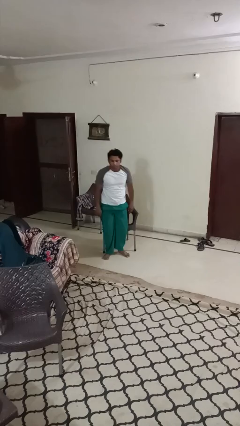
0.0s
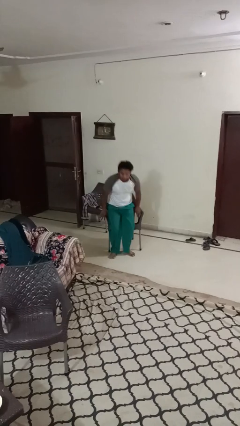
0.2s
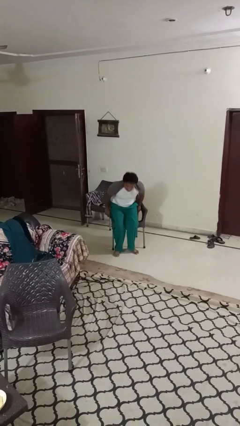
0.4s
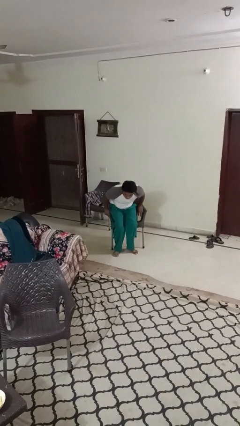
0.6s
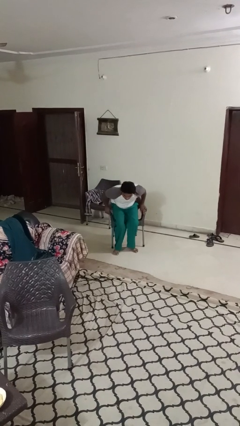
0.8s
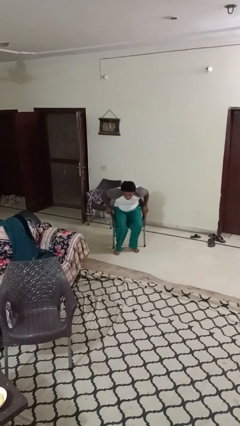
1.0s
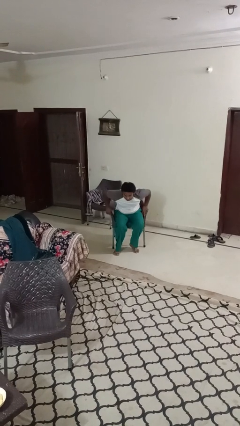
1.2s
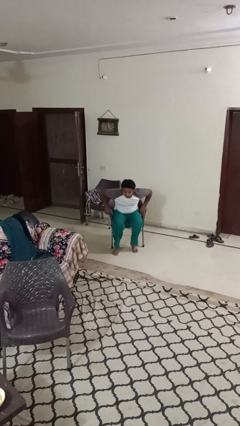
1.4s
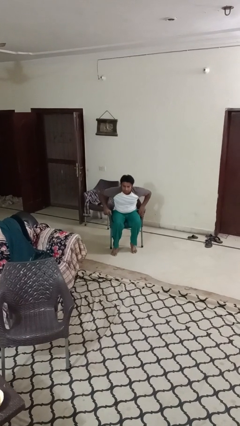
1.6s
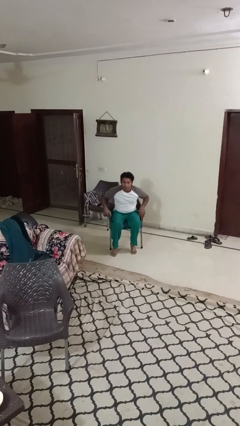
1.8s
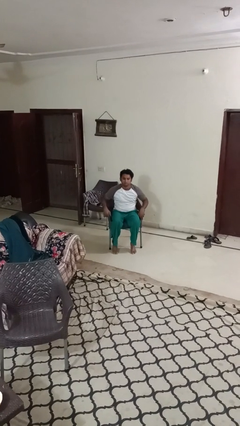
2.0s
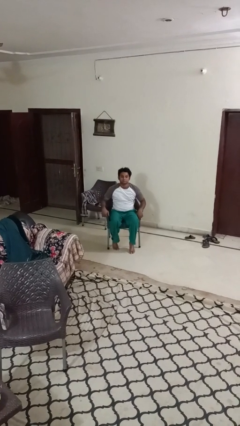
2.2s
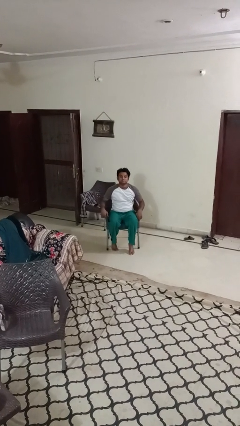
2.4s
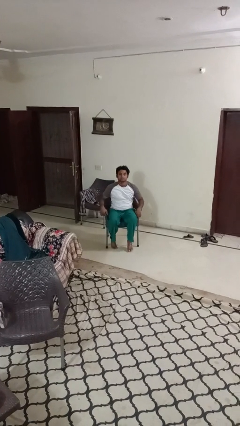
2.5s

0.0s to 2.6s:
person sits down

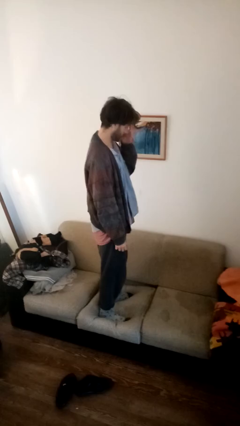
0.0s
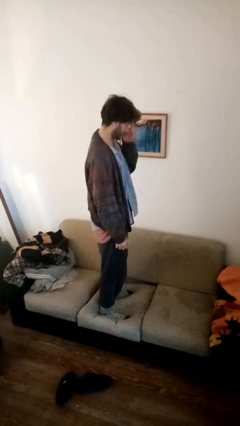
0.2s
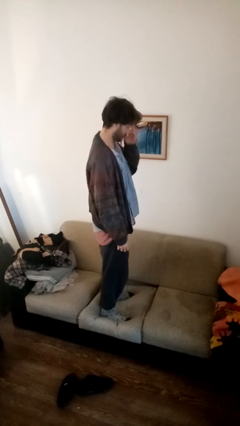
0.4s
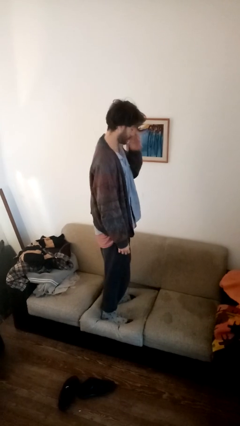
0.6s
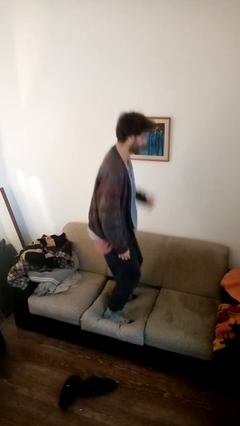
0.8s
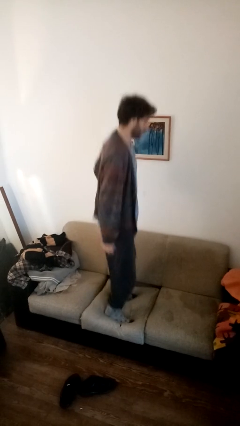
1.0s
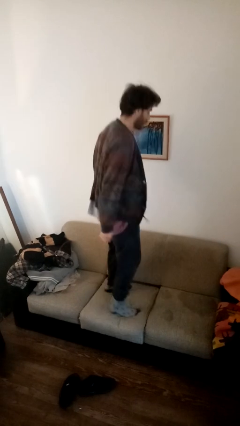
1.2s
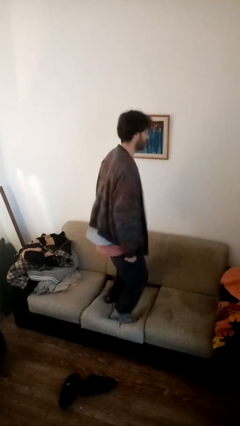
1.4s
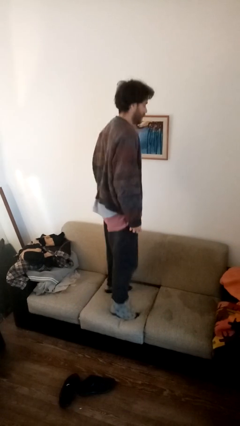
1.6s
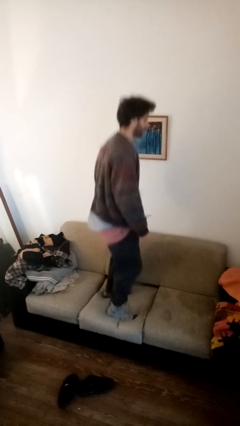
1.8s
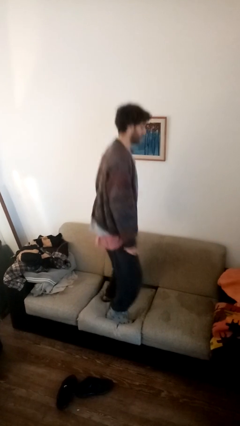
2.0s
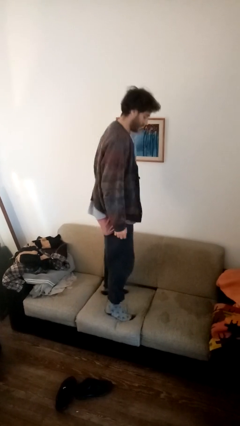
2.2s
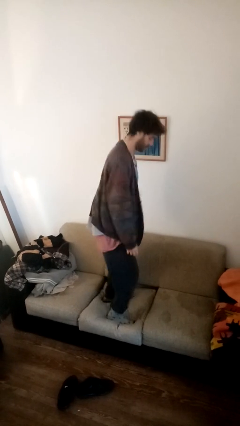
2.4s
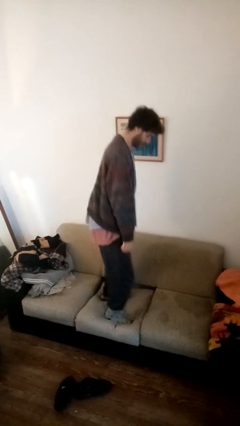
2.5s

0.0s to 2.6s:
person jumps on couch

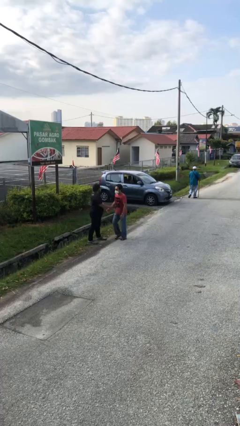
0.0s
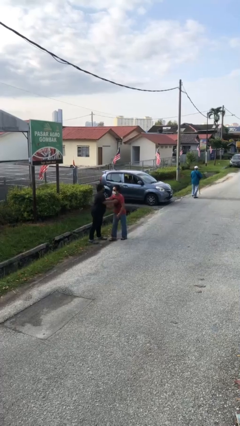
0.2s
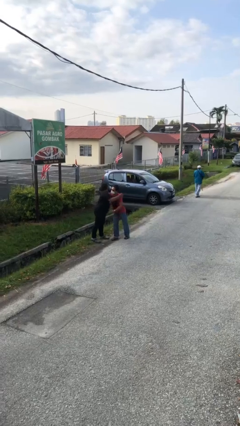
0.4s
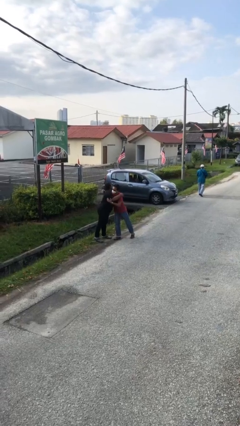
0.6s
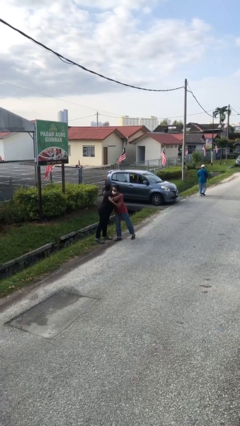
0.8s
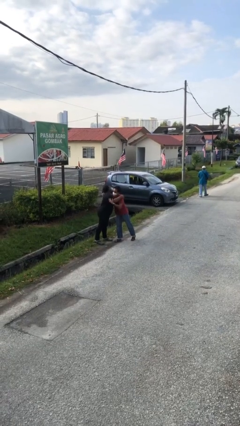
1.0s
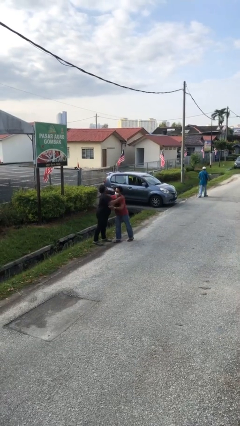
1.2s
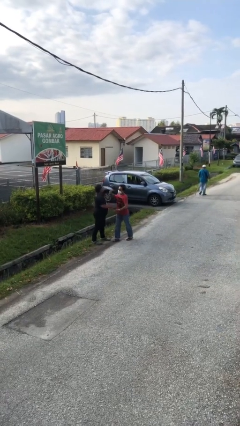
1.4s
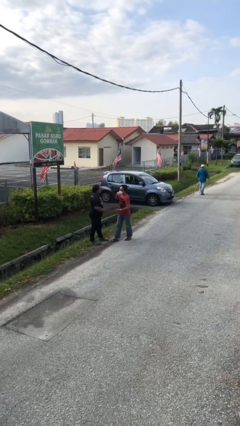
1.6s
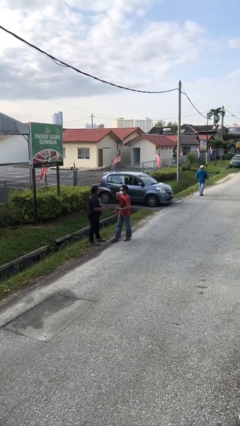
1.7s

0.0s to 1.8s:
person embraces person

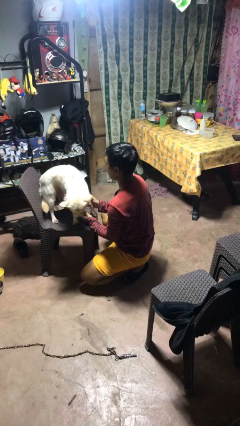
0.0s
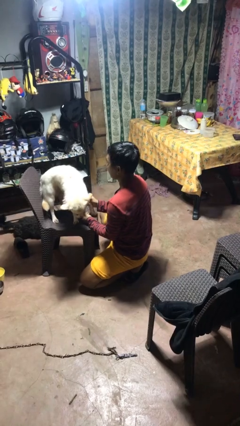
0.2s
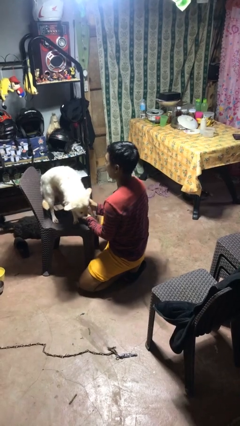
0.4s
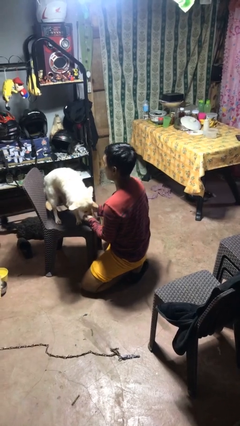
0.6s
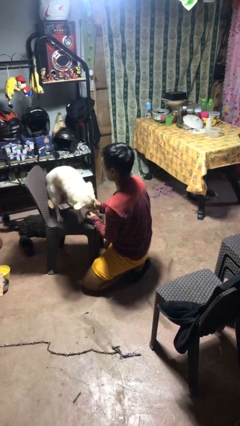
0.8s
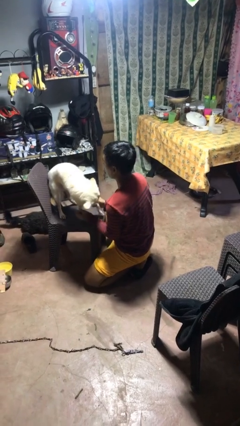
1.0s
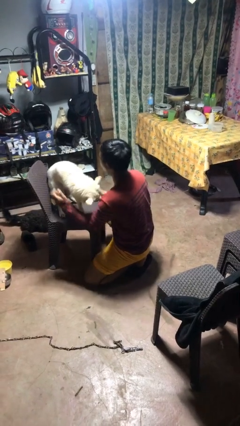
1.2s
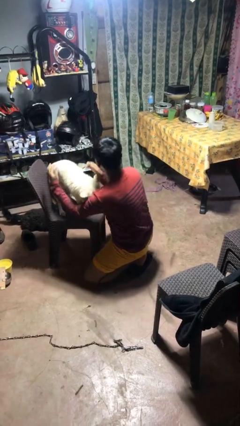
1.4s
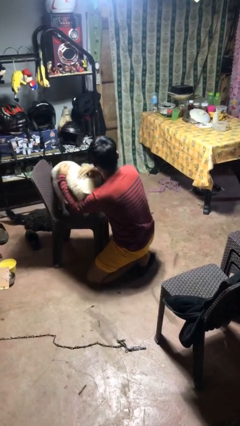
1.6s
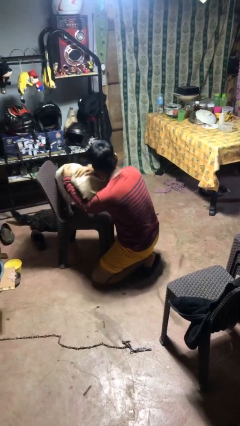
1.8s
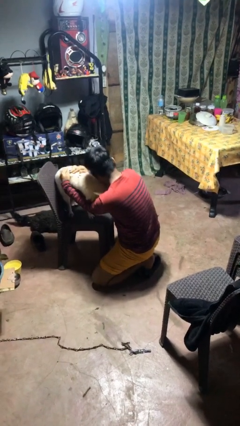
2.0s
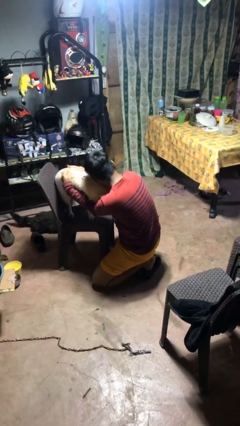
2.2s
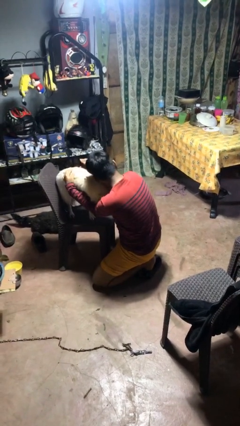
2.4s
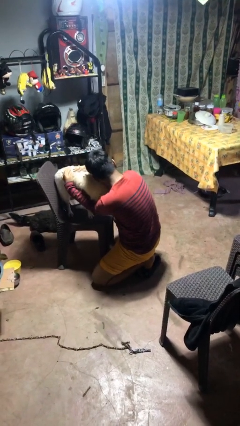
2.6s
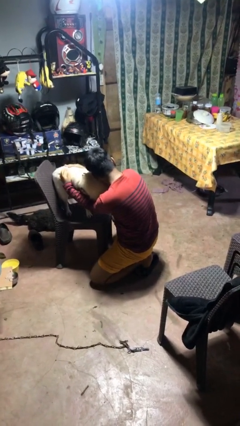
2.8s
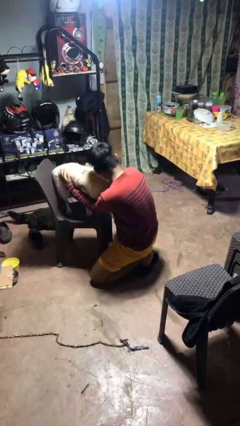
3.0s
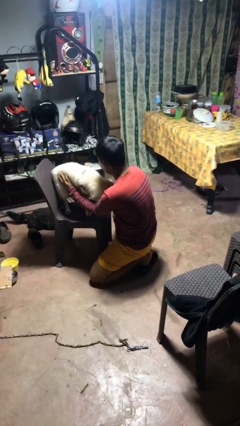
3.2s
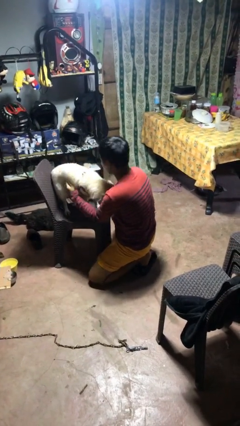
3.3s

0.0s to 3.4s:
person hugs dog

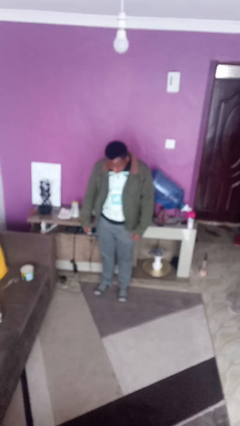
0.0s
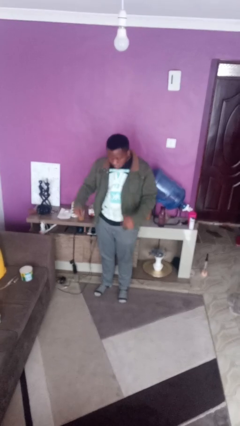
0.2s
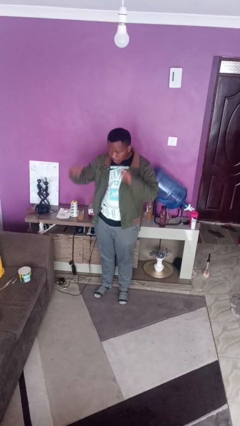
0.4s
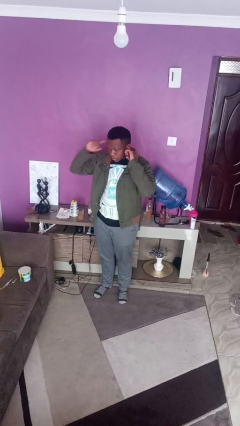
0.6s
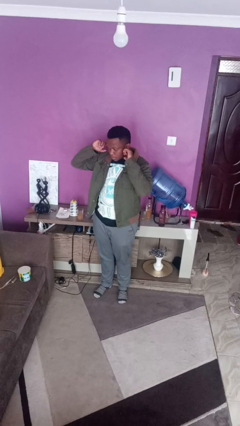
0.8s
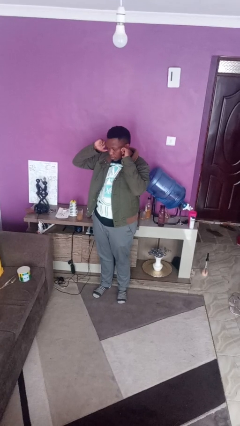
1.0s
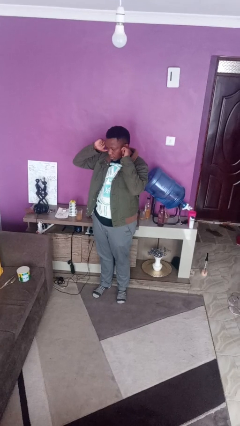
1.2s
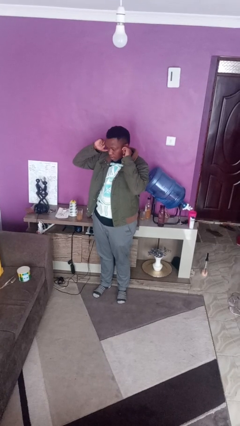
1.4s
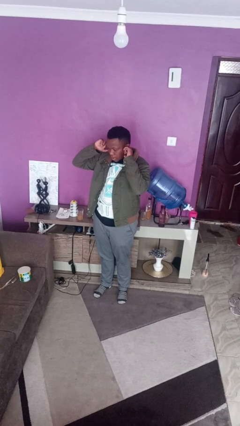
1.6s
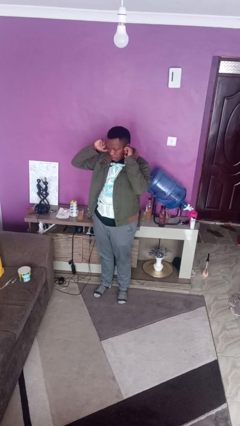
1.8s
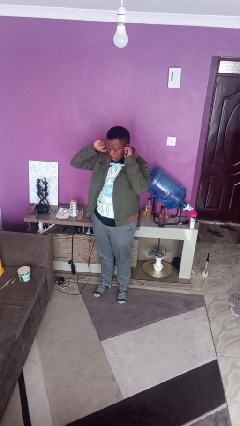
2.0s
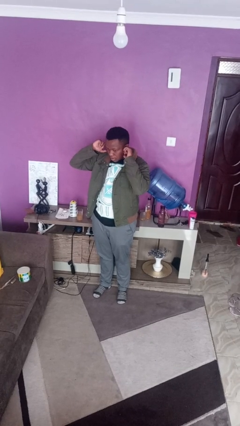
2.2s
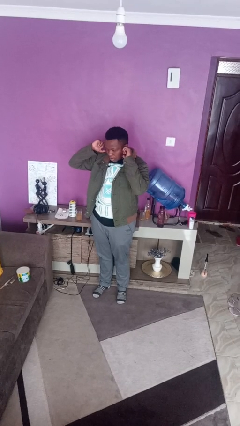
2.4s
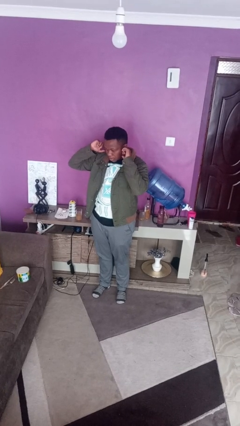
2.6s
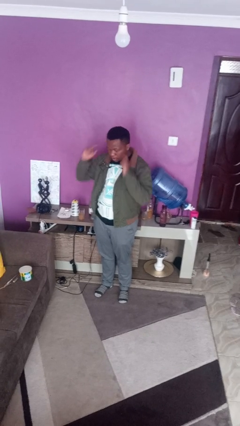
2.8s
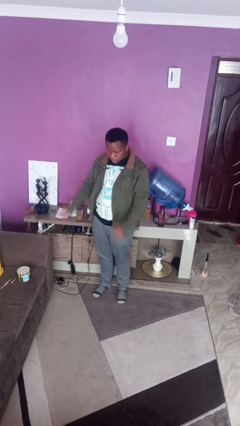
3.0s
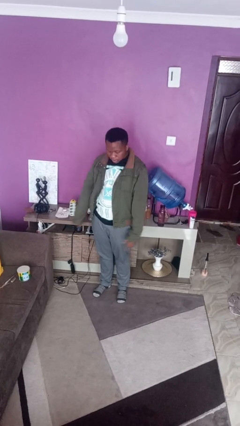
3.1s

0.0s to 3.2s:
person puts fingers in ear

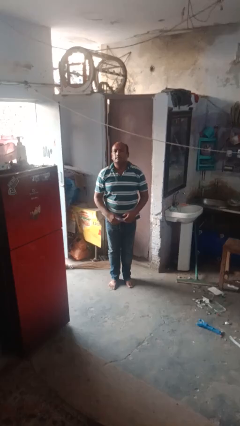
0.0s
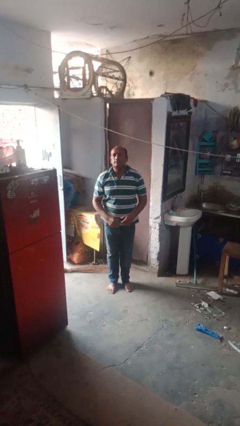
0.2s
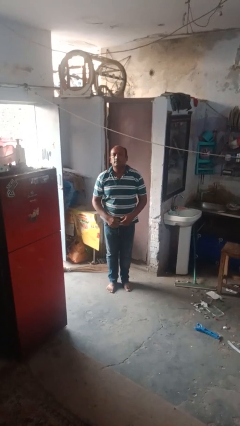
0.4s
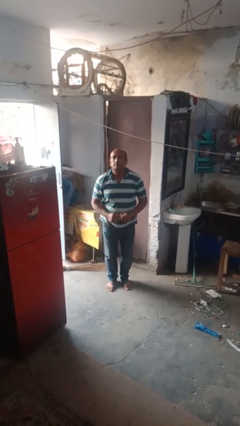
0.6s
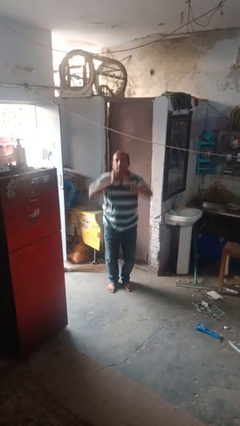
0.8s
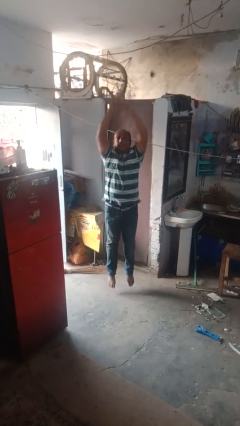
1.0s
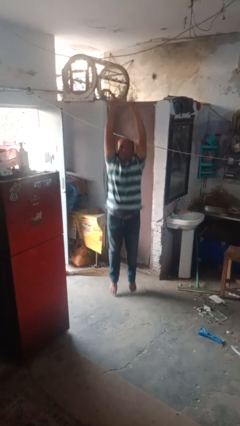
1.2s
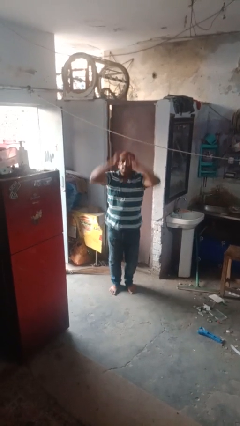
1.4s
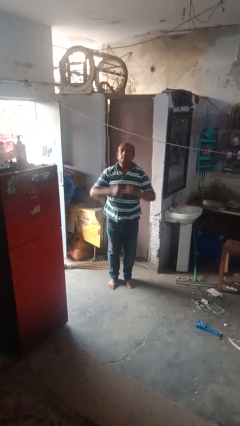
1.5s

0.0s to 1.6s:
person jumps

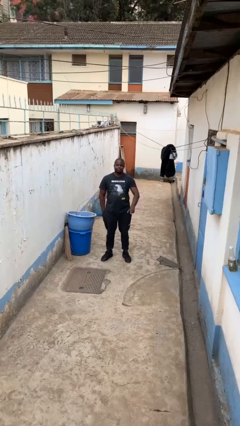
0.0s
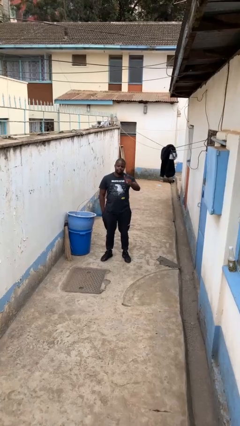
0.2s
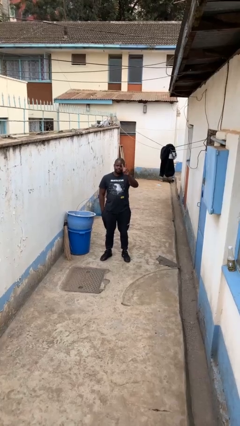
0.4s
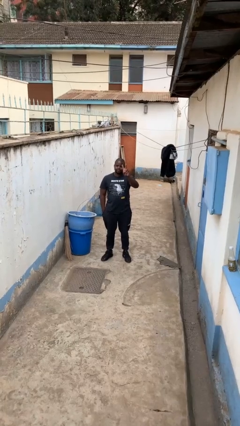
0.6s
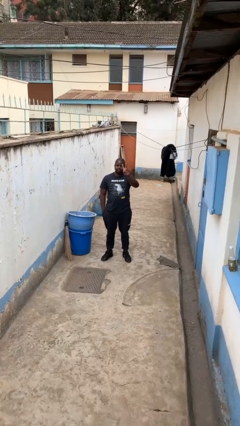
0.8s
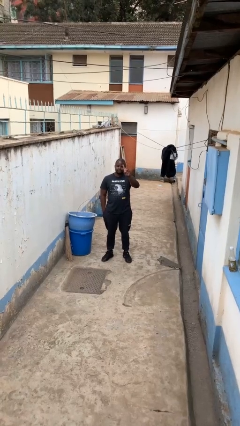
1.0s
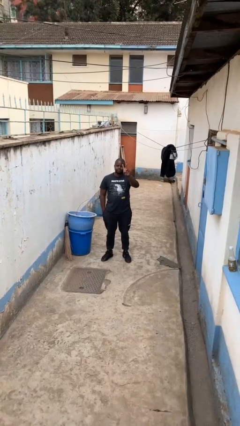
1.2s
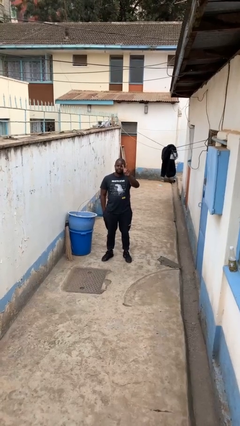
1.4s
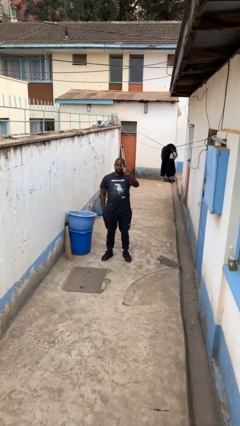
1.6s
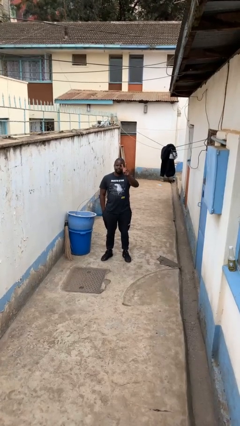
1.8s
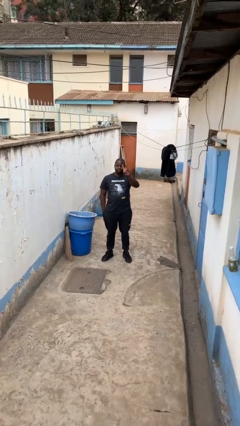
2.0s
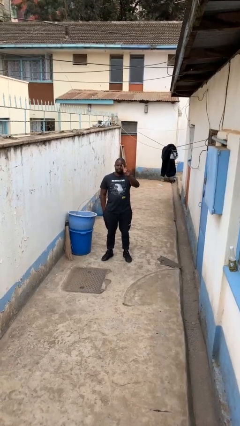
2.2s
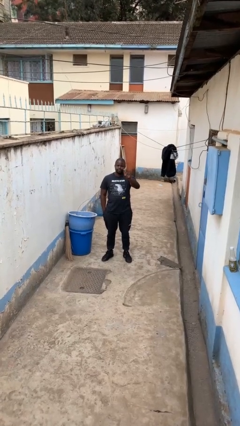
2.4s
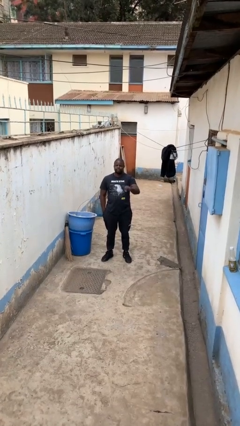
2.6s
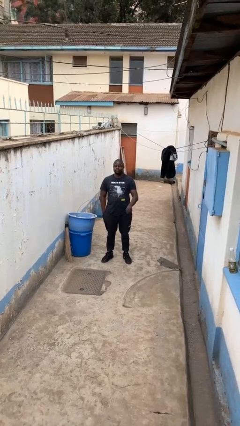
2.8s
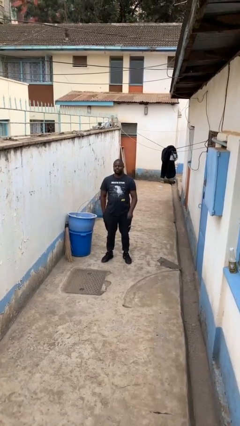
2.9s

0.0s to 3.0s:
person gestures peace
